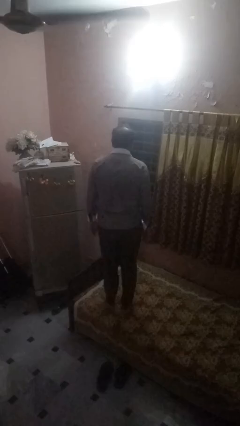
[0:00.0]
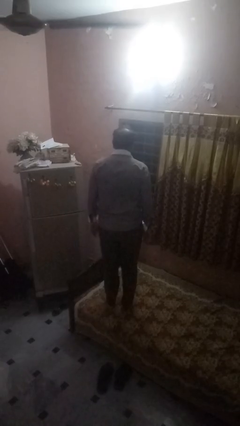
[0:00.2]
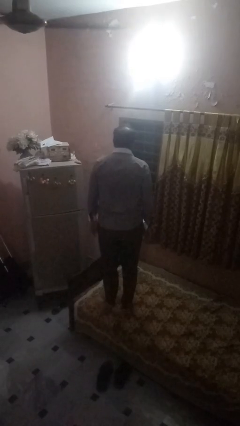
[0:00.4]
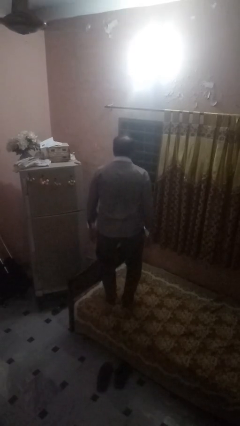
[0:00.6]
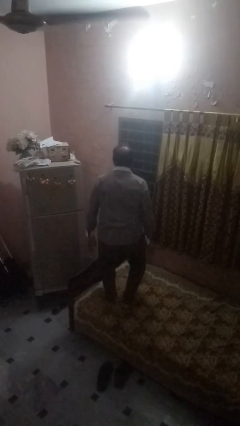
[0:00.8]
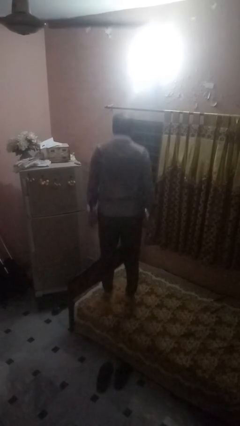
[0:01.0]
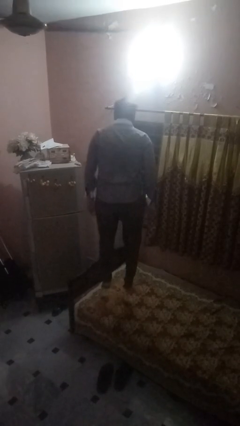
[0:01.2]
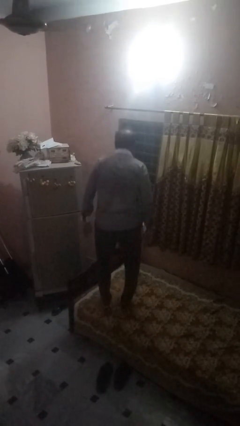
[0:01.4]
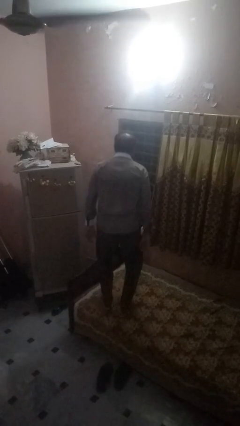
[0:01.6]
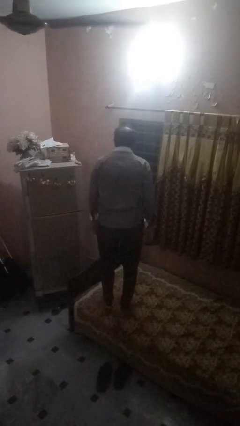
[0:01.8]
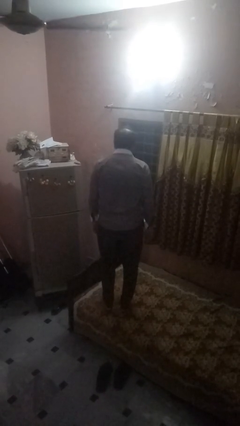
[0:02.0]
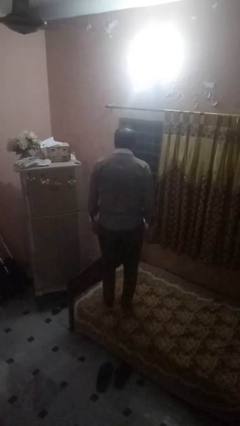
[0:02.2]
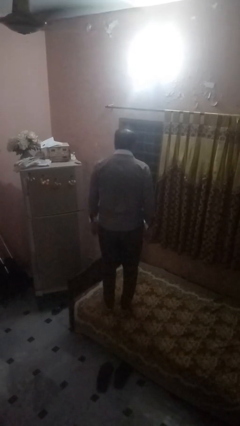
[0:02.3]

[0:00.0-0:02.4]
person jumps on bed

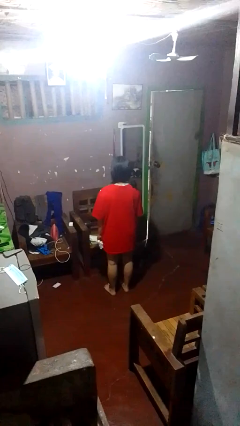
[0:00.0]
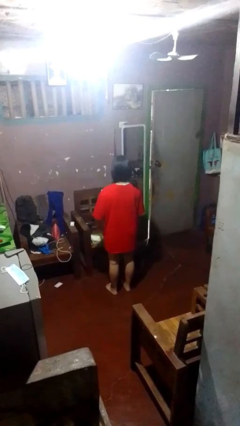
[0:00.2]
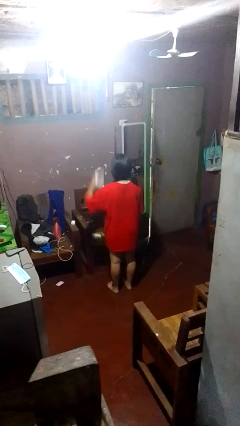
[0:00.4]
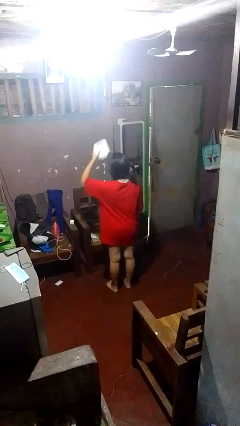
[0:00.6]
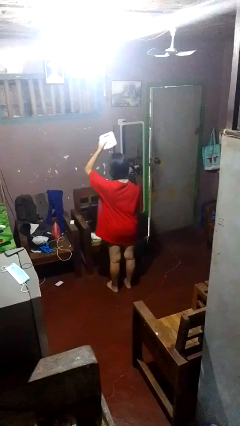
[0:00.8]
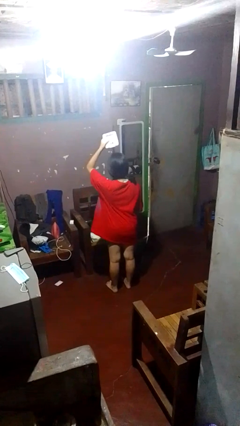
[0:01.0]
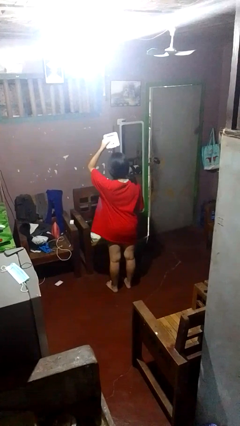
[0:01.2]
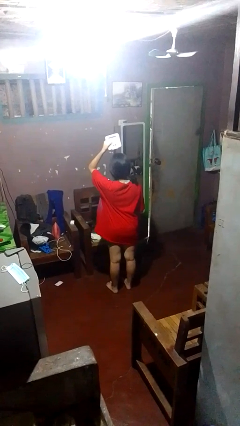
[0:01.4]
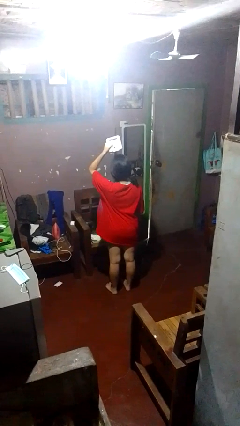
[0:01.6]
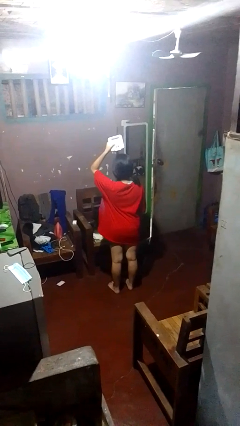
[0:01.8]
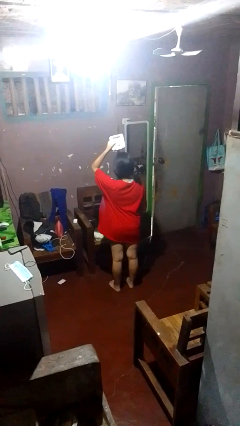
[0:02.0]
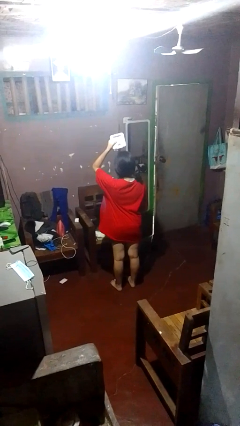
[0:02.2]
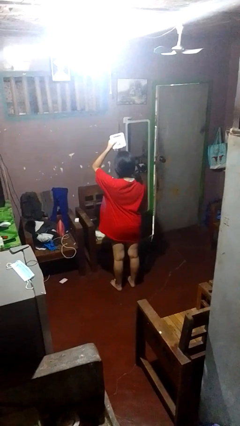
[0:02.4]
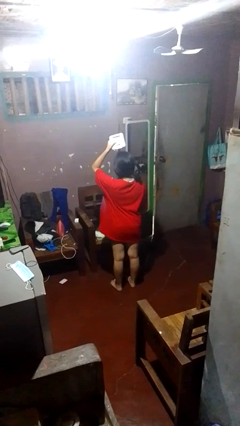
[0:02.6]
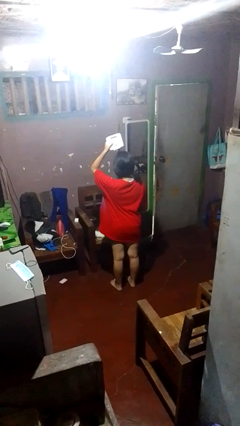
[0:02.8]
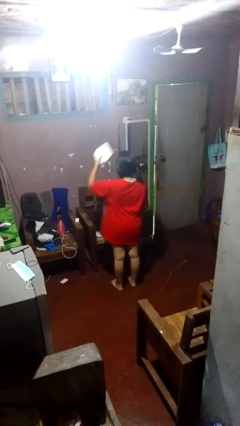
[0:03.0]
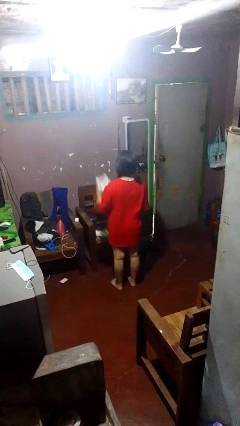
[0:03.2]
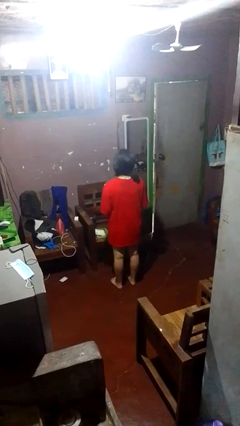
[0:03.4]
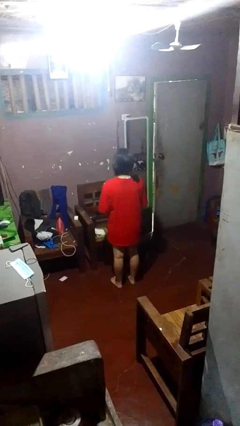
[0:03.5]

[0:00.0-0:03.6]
person holds object above head

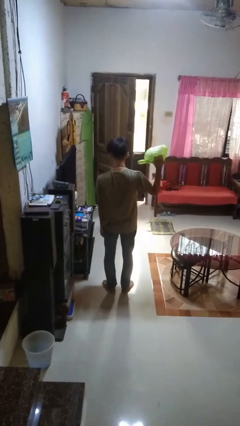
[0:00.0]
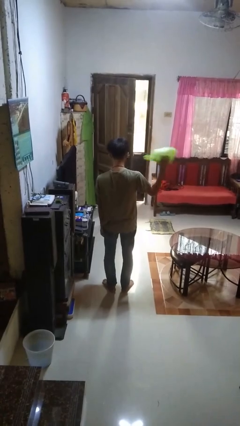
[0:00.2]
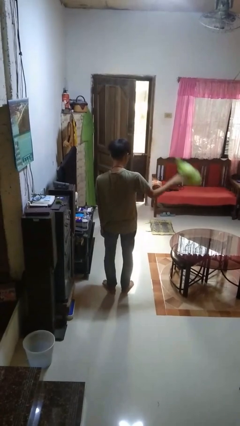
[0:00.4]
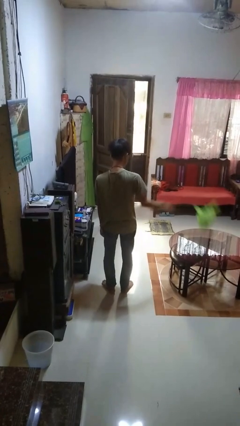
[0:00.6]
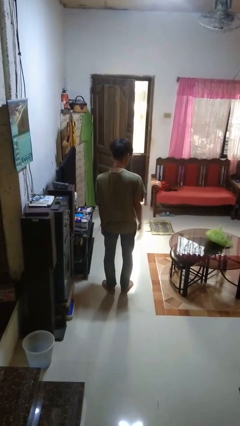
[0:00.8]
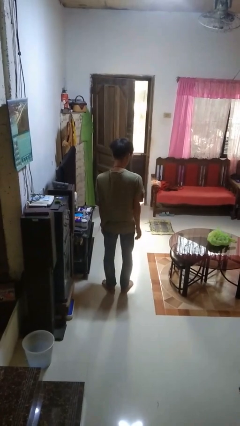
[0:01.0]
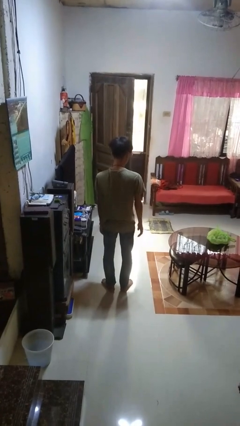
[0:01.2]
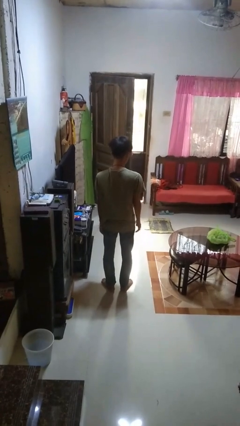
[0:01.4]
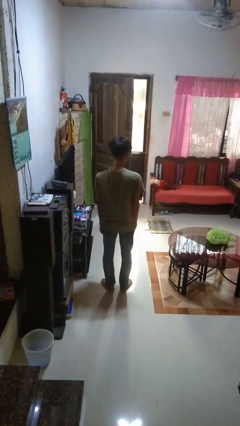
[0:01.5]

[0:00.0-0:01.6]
person throws object on table

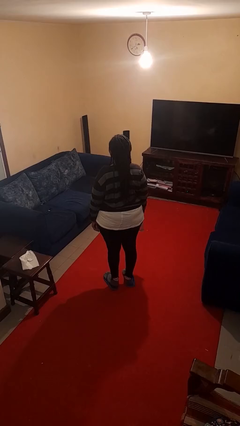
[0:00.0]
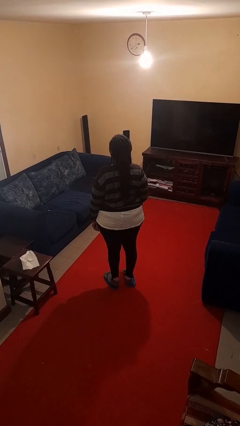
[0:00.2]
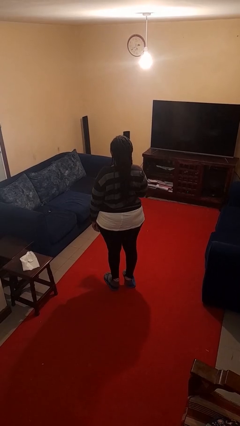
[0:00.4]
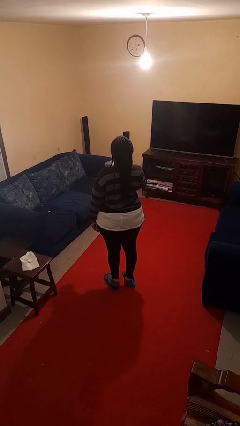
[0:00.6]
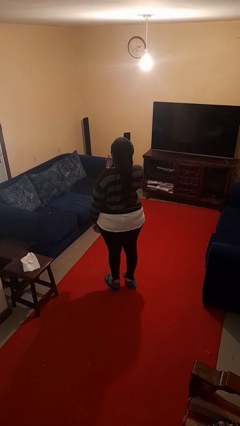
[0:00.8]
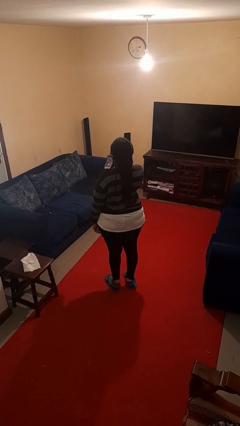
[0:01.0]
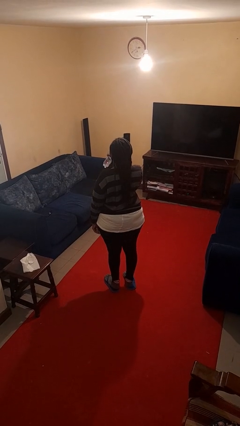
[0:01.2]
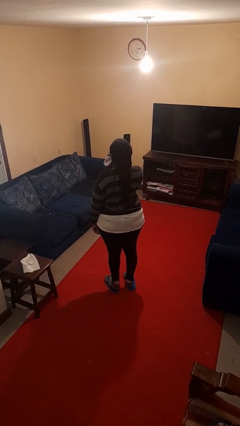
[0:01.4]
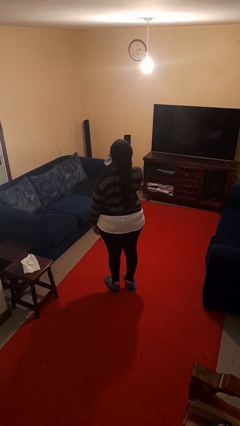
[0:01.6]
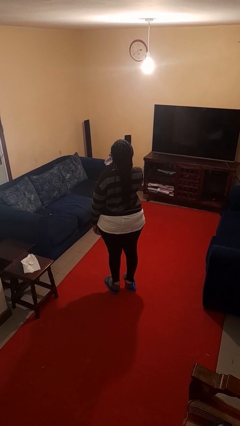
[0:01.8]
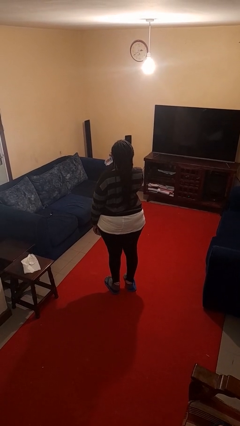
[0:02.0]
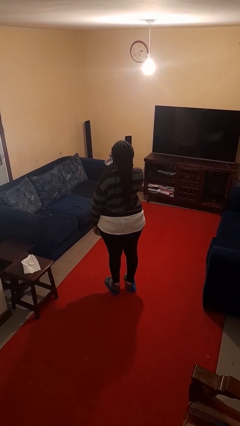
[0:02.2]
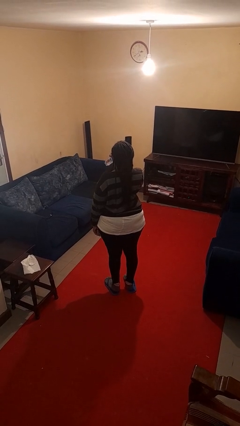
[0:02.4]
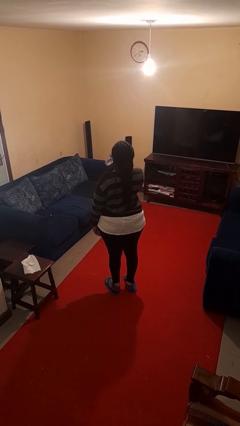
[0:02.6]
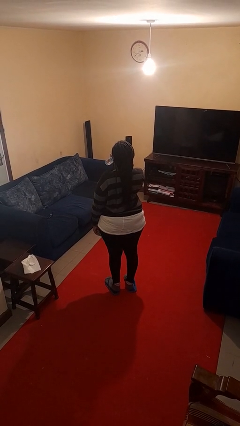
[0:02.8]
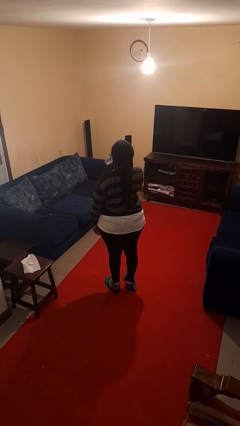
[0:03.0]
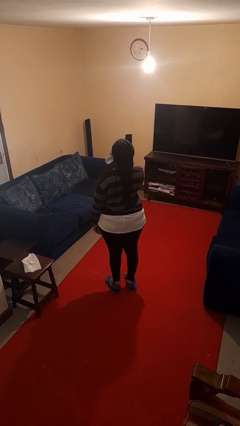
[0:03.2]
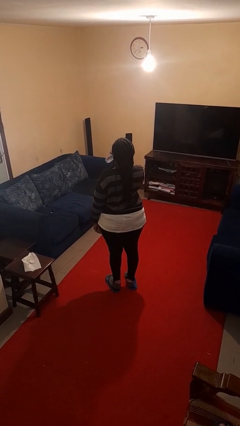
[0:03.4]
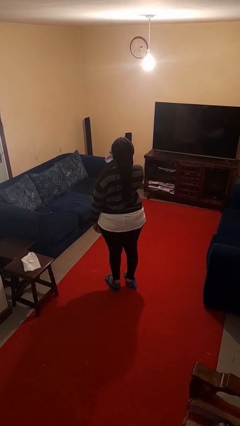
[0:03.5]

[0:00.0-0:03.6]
person drinks from bottle

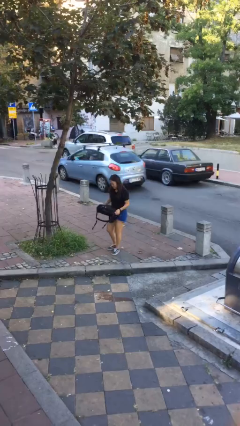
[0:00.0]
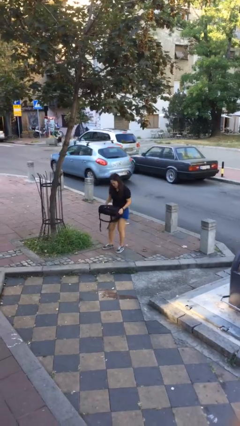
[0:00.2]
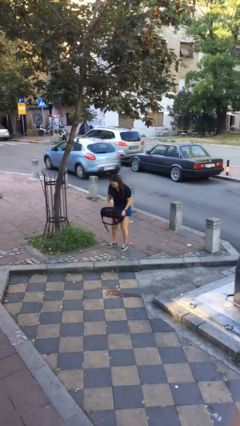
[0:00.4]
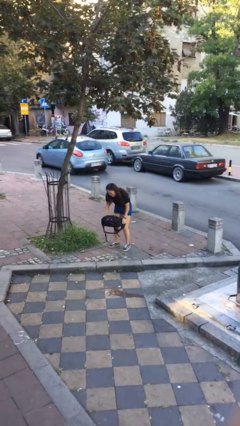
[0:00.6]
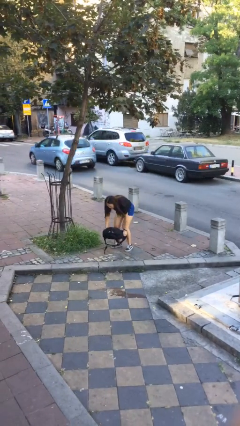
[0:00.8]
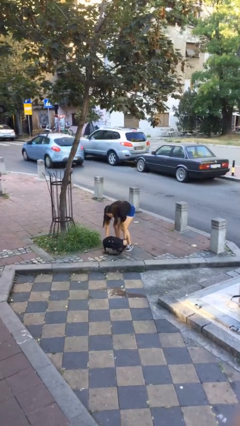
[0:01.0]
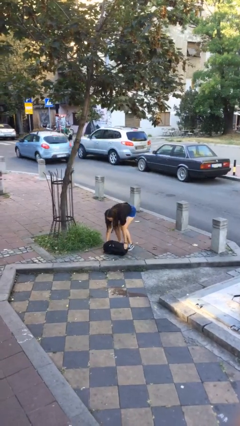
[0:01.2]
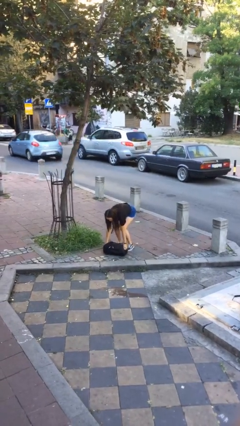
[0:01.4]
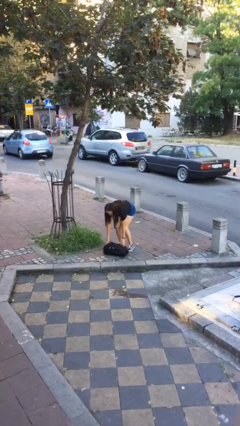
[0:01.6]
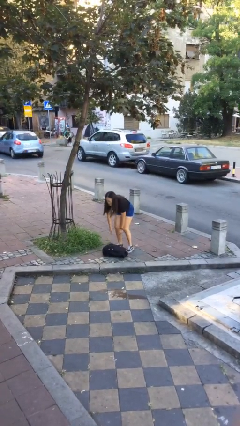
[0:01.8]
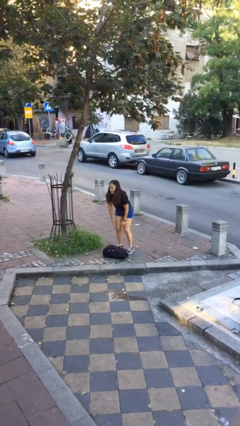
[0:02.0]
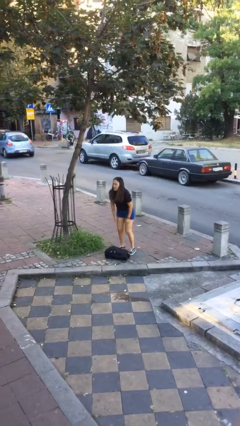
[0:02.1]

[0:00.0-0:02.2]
person puts down object on floor

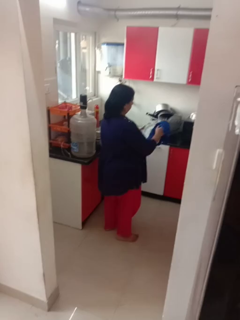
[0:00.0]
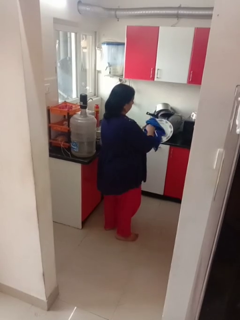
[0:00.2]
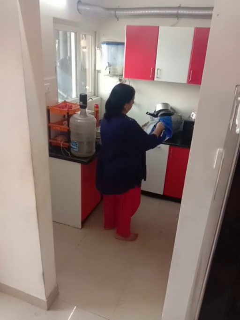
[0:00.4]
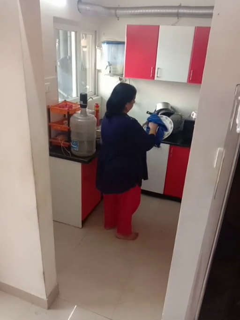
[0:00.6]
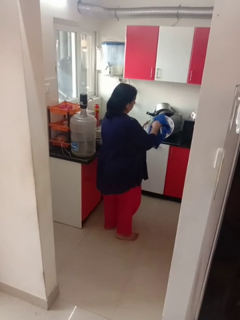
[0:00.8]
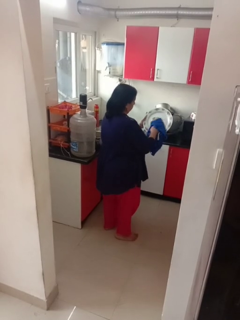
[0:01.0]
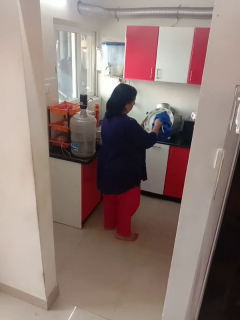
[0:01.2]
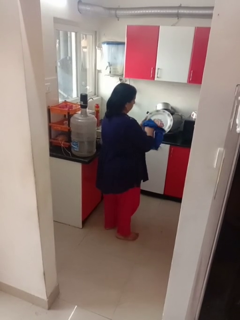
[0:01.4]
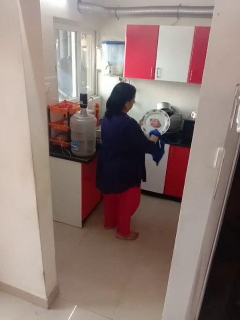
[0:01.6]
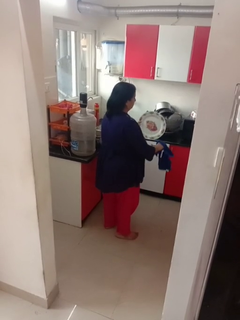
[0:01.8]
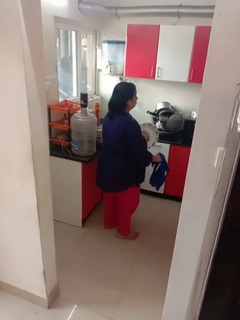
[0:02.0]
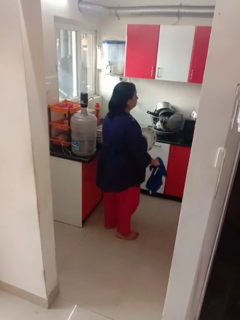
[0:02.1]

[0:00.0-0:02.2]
person dries dish

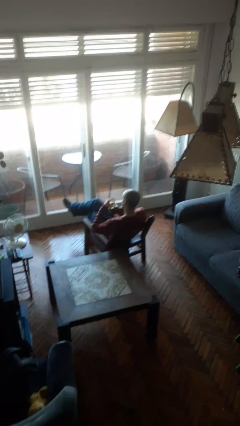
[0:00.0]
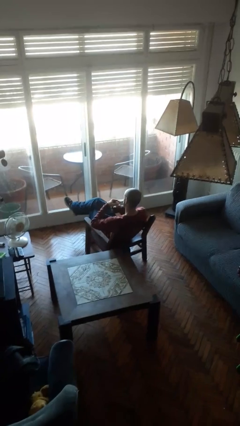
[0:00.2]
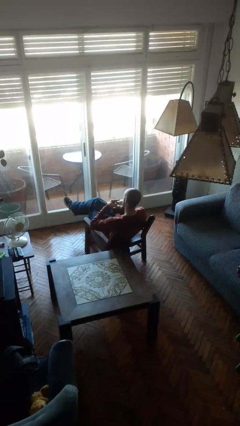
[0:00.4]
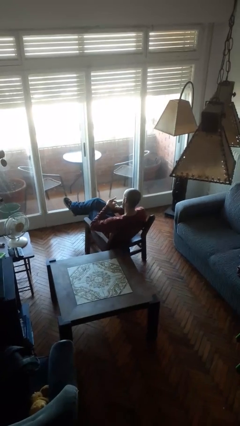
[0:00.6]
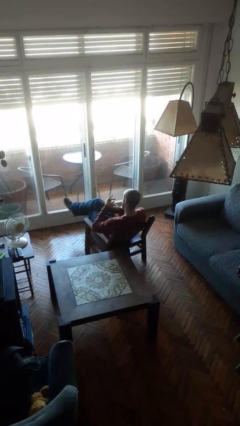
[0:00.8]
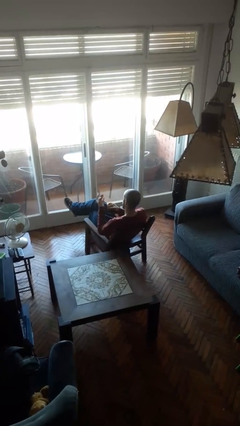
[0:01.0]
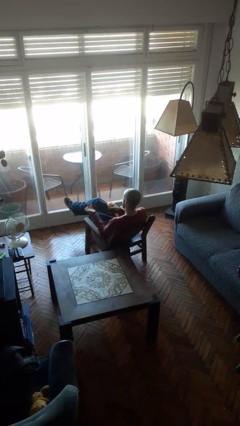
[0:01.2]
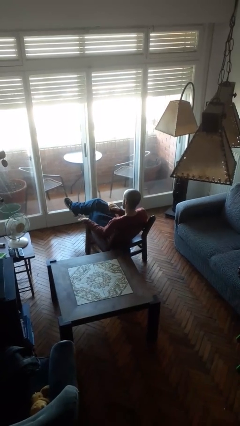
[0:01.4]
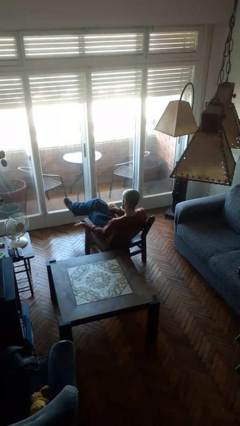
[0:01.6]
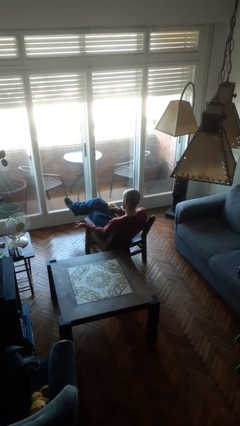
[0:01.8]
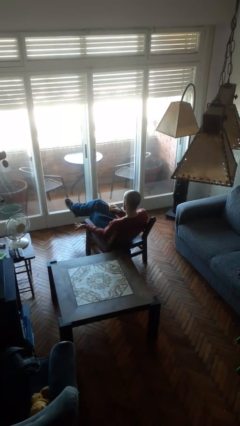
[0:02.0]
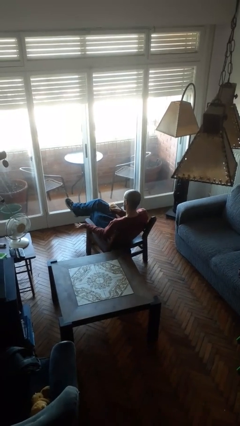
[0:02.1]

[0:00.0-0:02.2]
person opens jar
